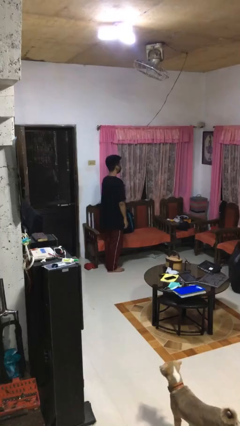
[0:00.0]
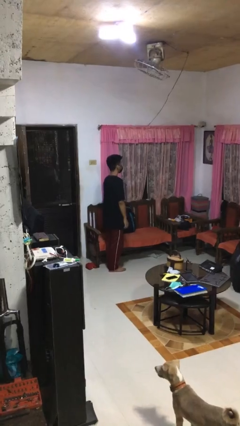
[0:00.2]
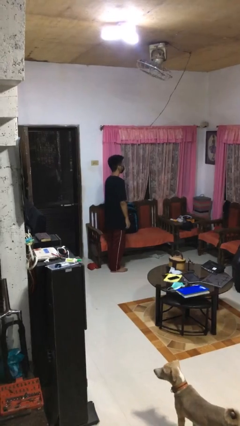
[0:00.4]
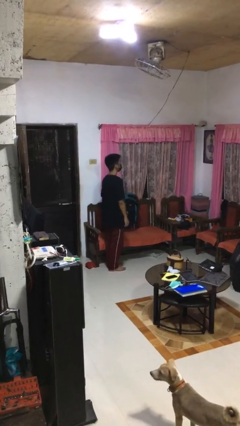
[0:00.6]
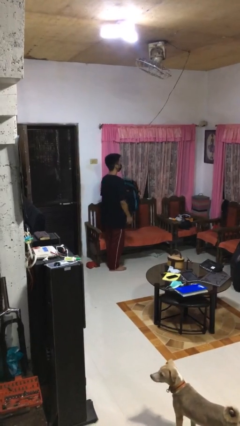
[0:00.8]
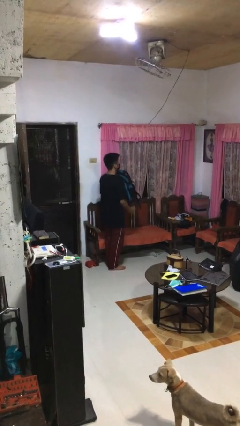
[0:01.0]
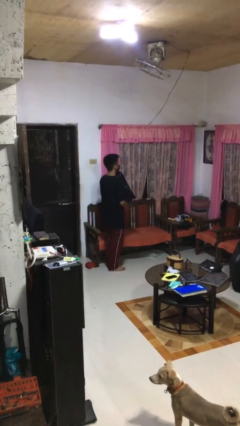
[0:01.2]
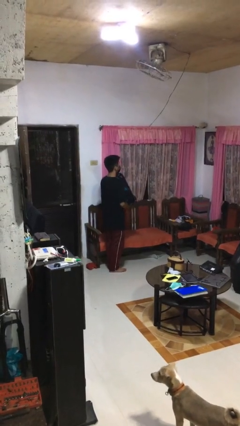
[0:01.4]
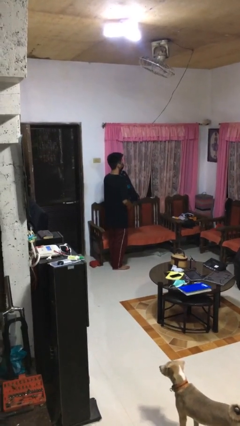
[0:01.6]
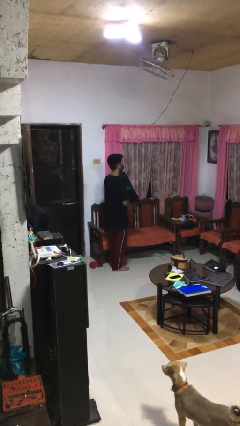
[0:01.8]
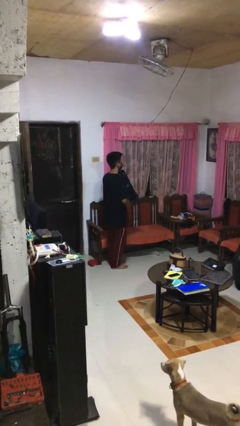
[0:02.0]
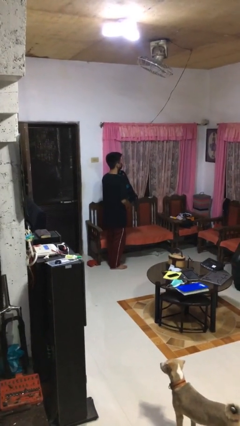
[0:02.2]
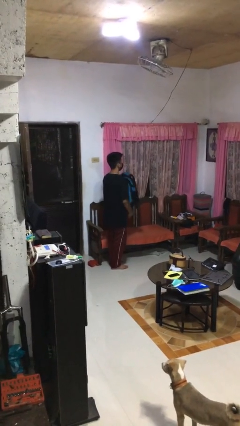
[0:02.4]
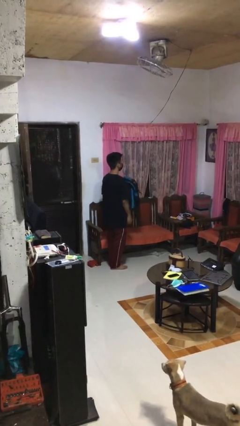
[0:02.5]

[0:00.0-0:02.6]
person picks up object from couch

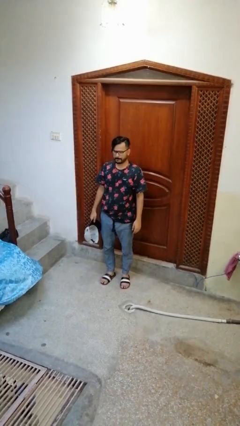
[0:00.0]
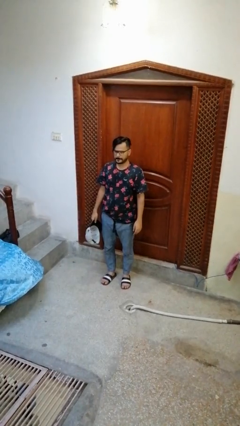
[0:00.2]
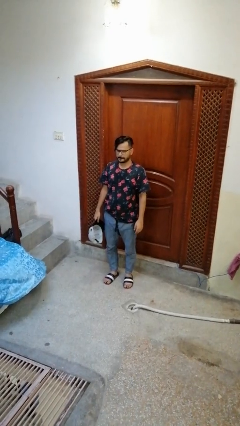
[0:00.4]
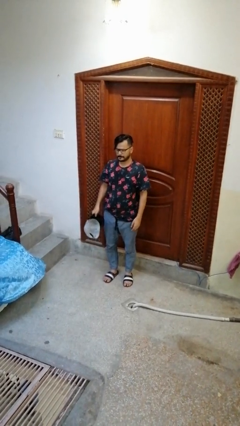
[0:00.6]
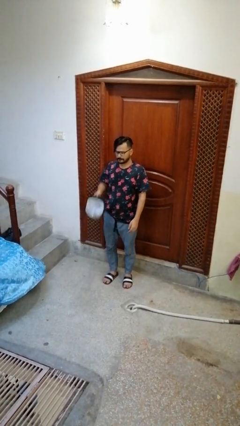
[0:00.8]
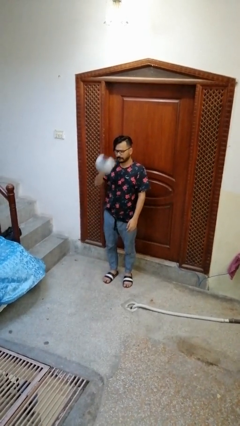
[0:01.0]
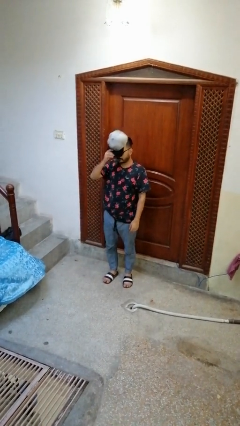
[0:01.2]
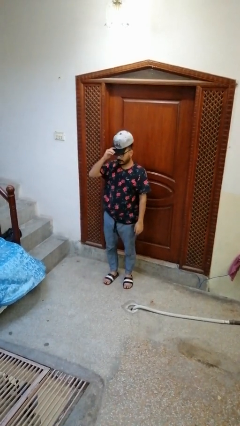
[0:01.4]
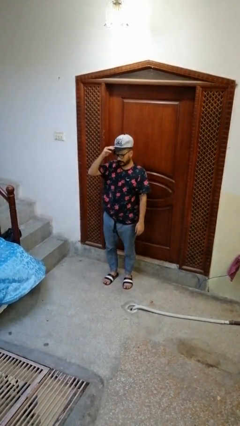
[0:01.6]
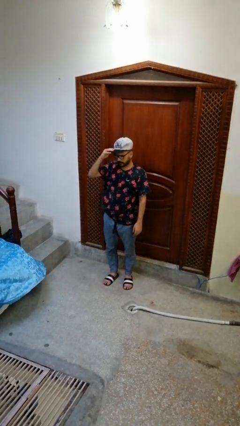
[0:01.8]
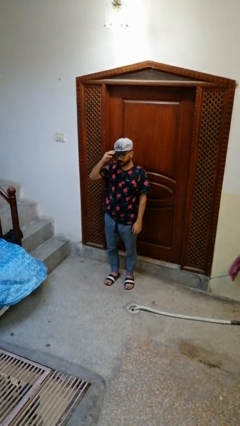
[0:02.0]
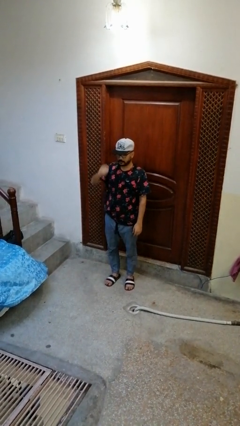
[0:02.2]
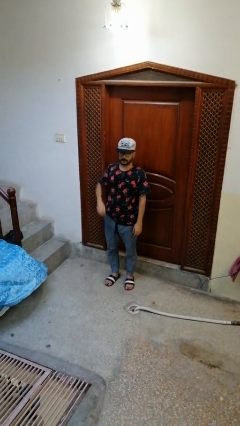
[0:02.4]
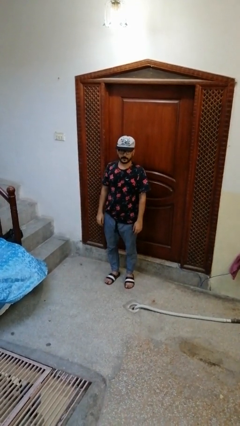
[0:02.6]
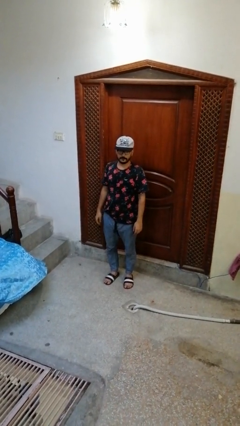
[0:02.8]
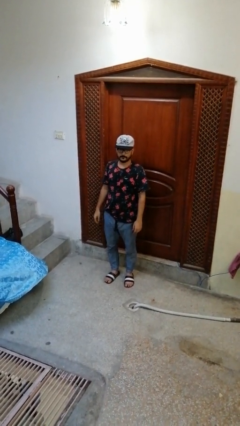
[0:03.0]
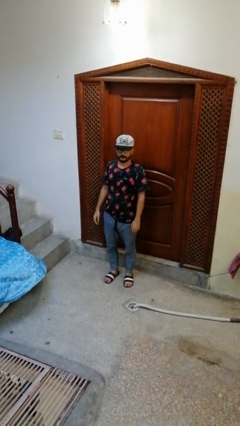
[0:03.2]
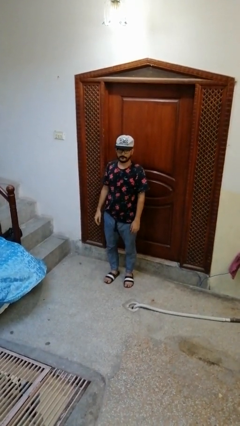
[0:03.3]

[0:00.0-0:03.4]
person puts on hat

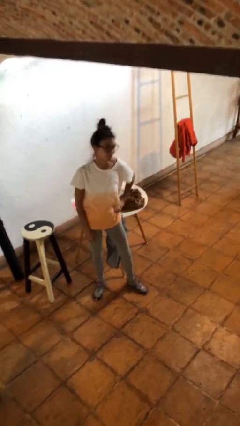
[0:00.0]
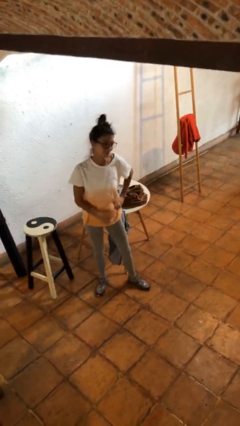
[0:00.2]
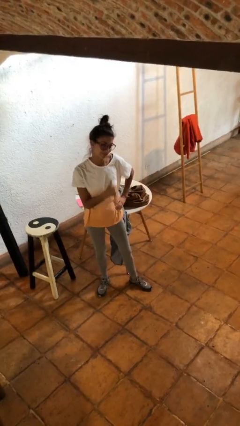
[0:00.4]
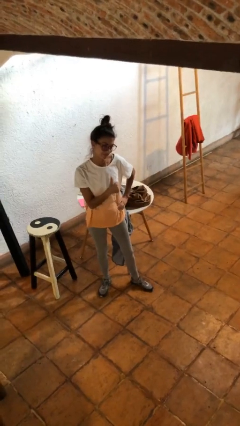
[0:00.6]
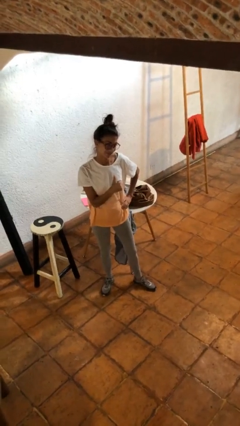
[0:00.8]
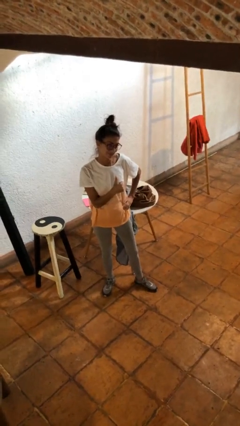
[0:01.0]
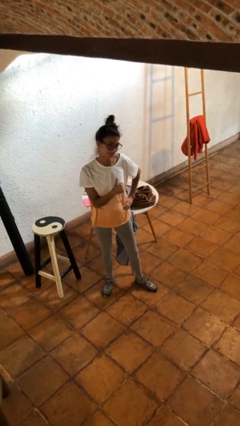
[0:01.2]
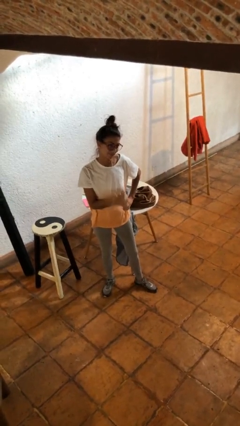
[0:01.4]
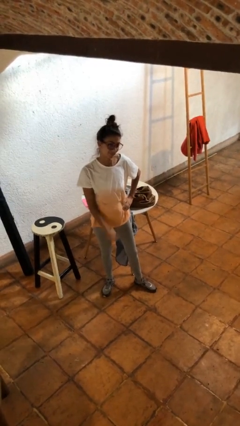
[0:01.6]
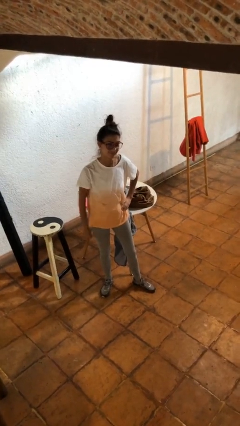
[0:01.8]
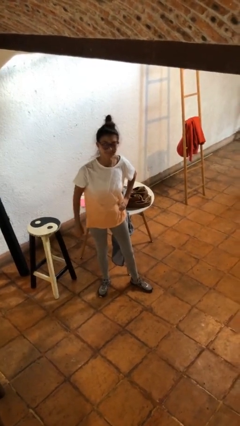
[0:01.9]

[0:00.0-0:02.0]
person gestures thumbs up

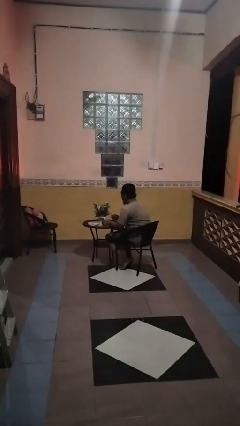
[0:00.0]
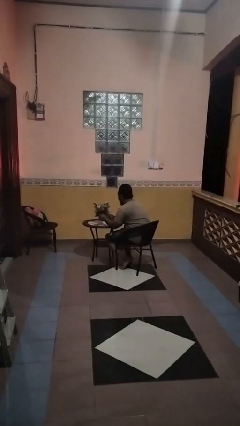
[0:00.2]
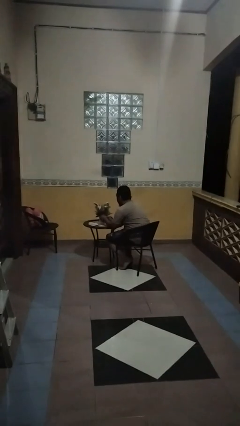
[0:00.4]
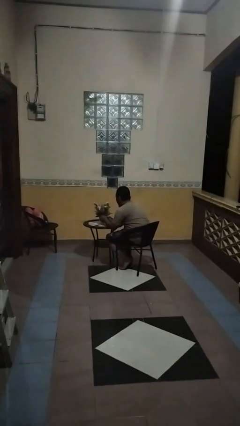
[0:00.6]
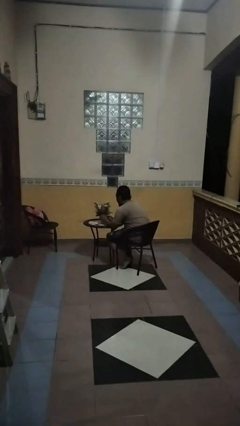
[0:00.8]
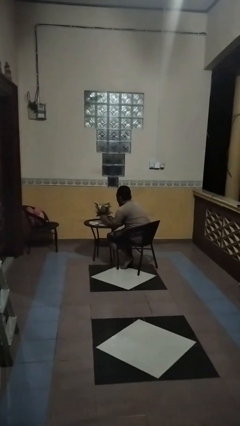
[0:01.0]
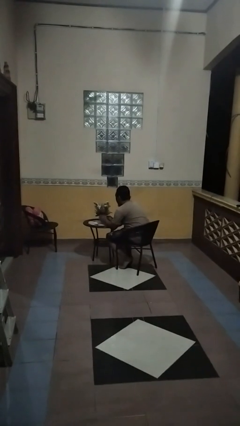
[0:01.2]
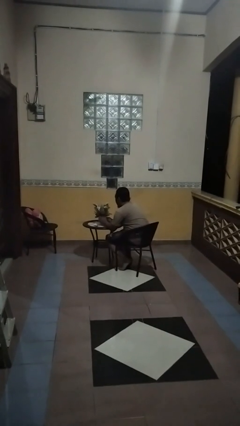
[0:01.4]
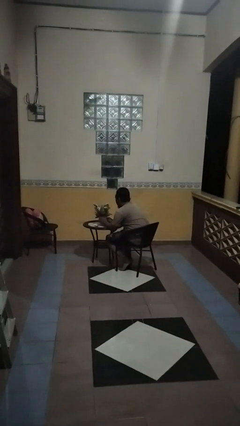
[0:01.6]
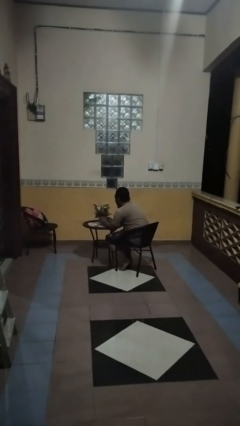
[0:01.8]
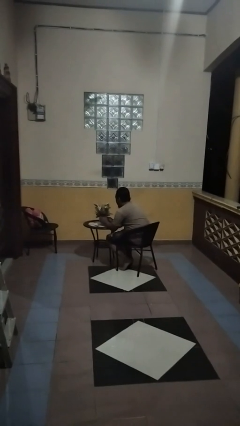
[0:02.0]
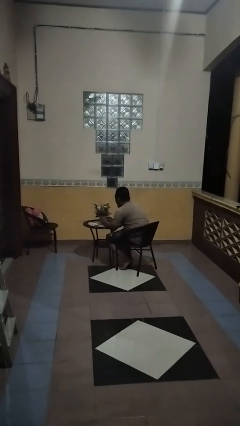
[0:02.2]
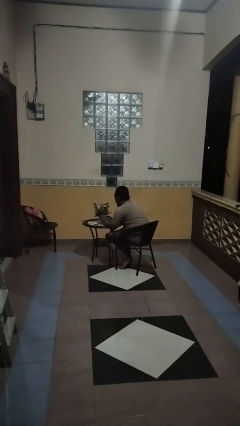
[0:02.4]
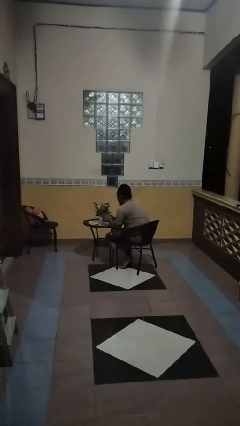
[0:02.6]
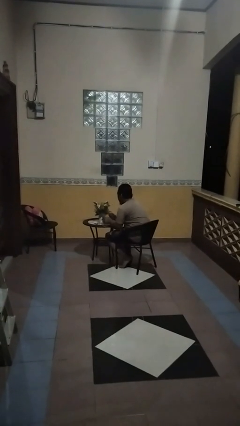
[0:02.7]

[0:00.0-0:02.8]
person arranges flowers in vase

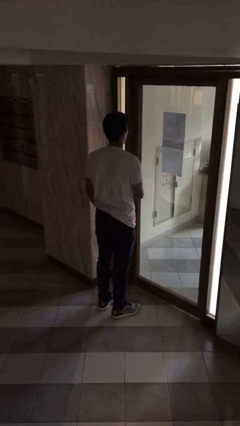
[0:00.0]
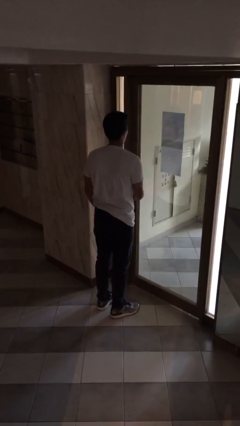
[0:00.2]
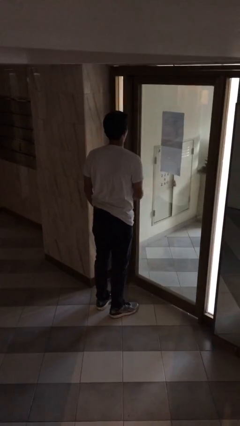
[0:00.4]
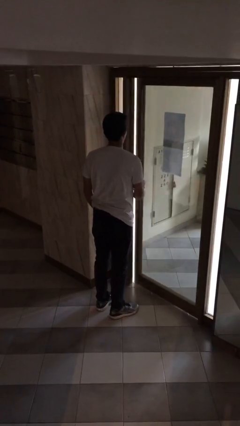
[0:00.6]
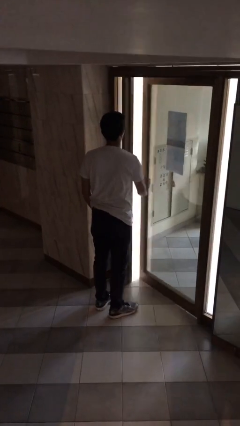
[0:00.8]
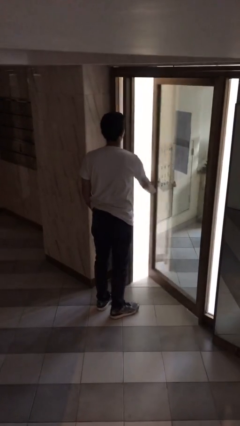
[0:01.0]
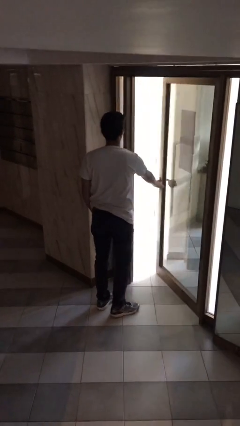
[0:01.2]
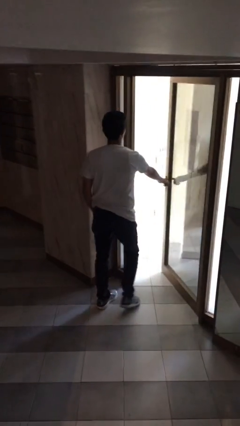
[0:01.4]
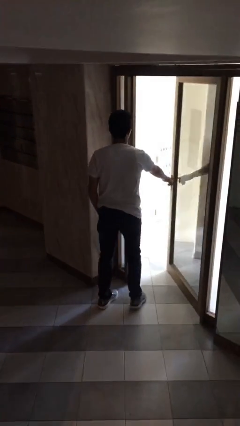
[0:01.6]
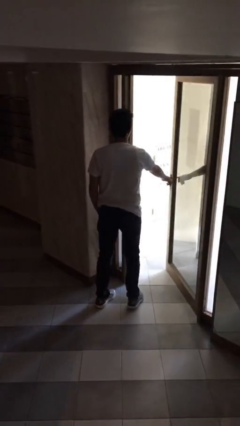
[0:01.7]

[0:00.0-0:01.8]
person opens facility door

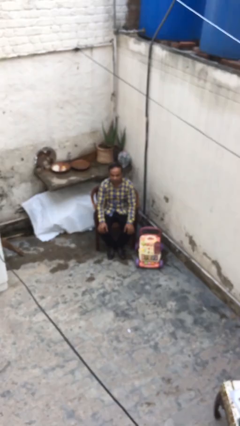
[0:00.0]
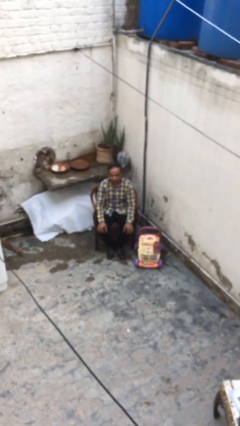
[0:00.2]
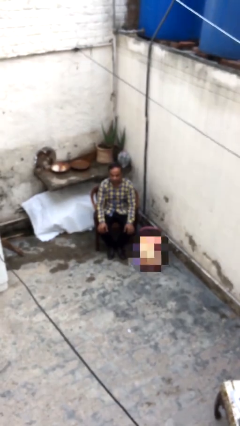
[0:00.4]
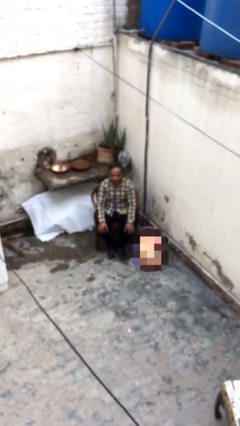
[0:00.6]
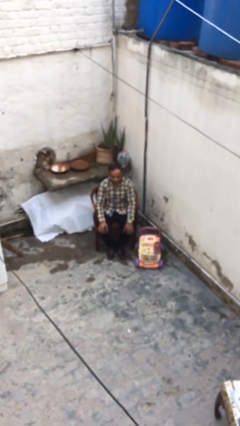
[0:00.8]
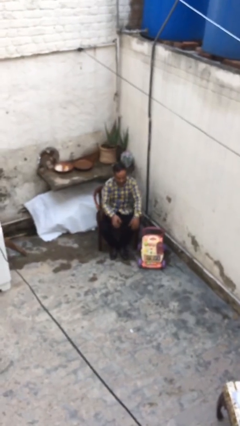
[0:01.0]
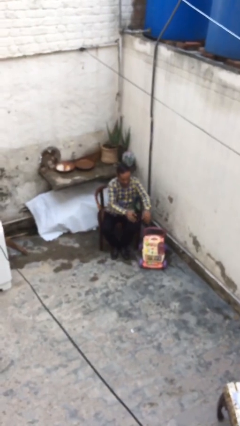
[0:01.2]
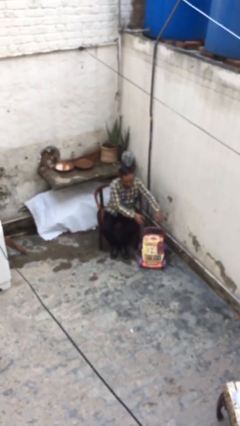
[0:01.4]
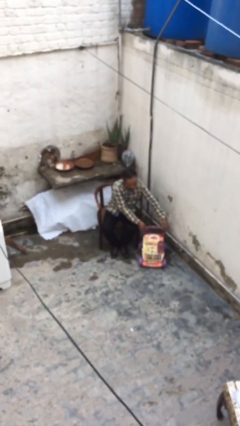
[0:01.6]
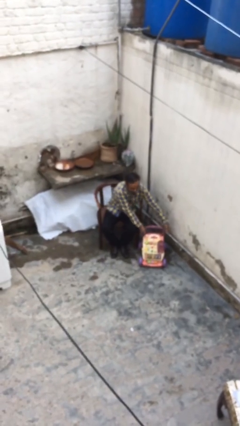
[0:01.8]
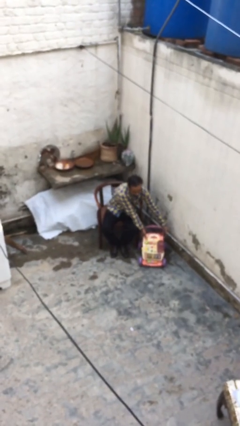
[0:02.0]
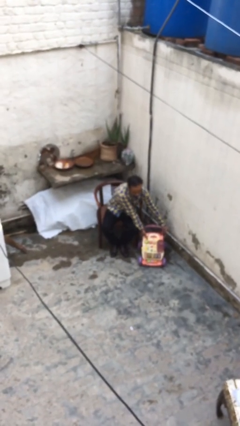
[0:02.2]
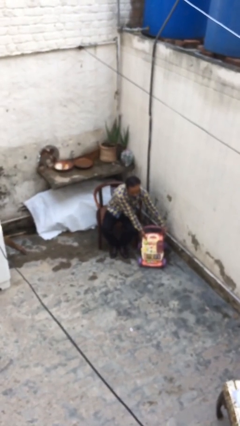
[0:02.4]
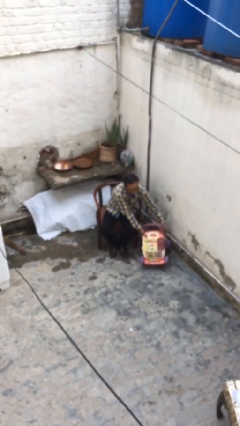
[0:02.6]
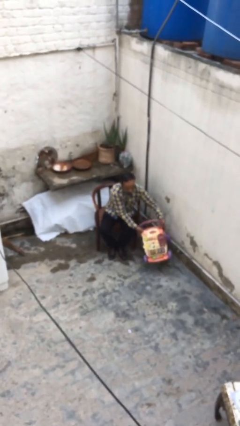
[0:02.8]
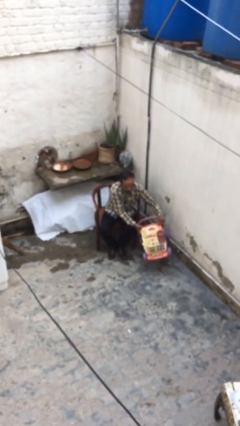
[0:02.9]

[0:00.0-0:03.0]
person picks up object from floor

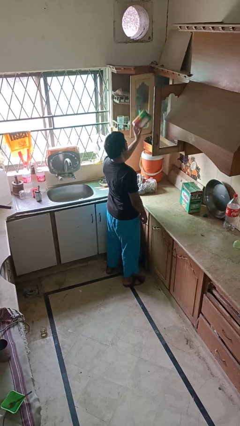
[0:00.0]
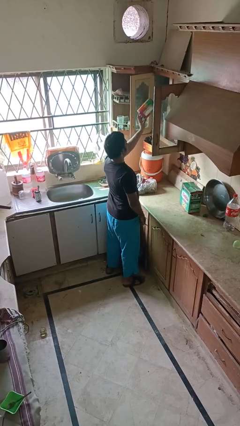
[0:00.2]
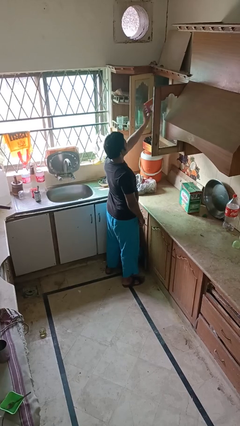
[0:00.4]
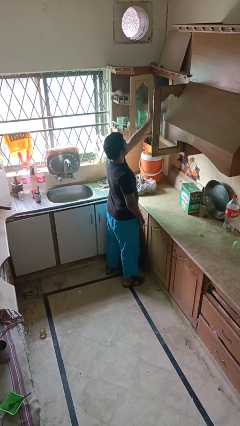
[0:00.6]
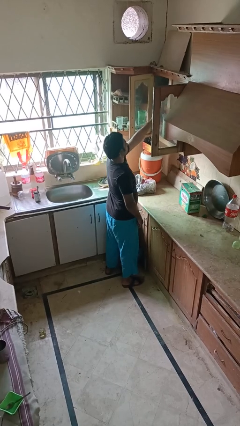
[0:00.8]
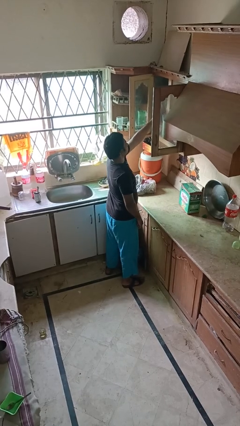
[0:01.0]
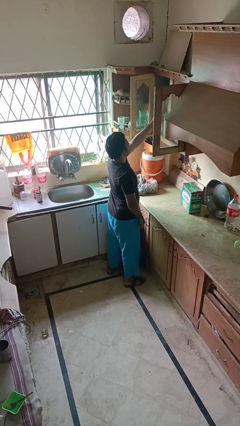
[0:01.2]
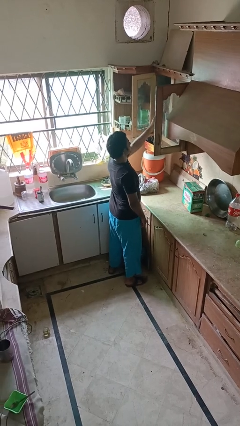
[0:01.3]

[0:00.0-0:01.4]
person puts down object into cabinet
